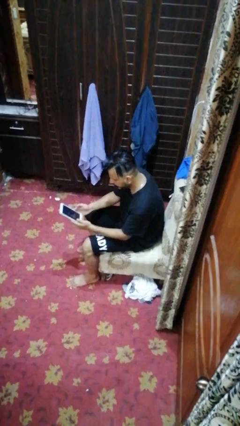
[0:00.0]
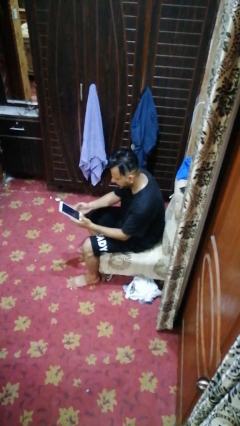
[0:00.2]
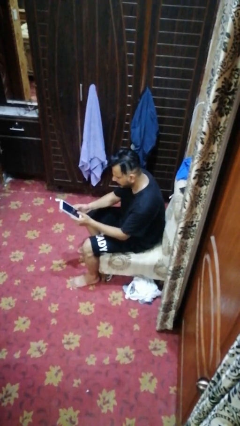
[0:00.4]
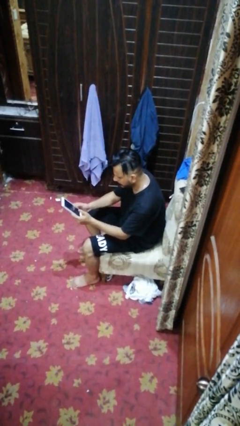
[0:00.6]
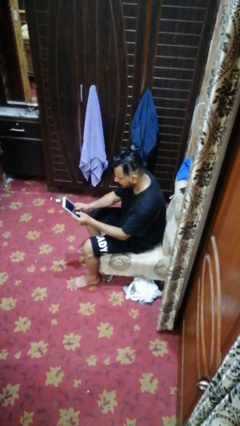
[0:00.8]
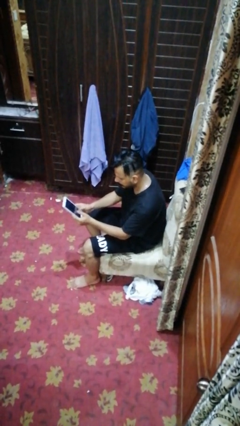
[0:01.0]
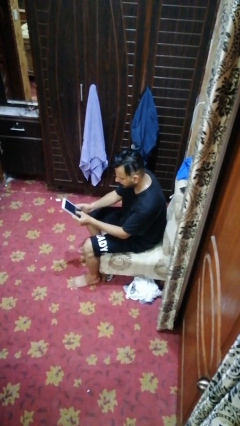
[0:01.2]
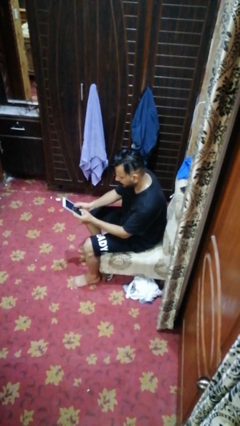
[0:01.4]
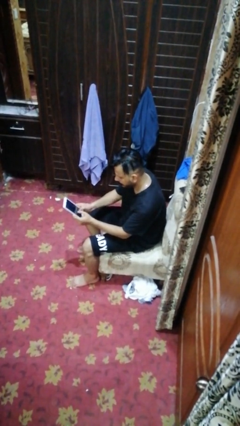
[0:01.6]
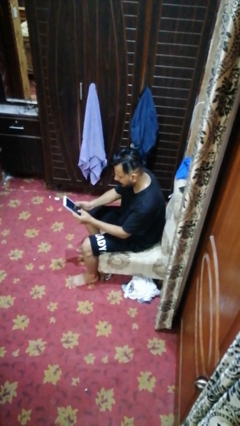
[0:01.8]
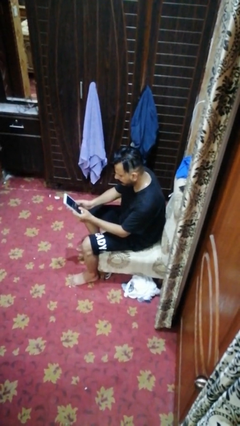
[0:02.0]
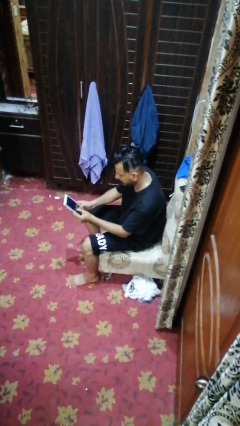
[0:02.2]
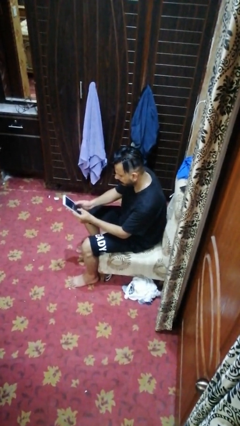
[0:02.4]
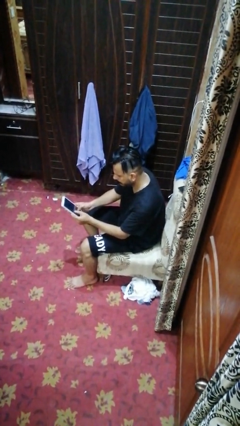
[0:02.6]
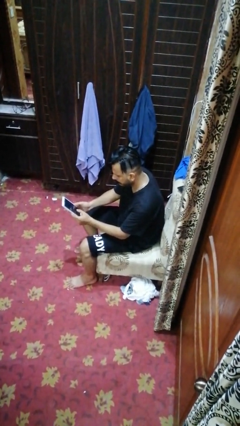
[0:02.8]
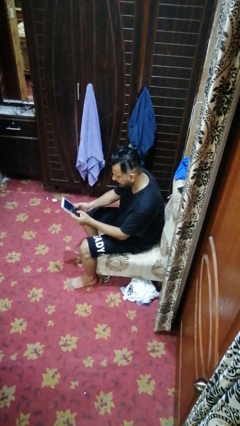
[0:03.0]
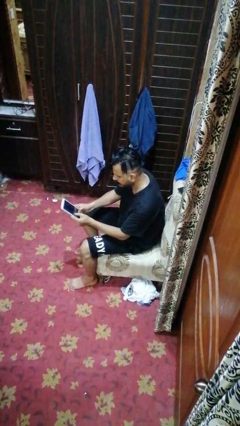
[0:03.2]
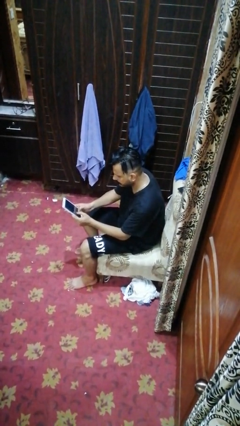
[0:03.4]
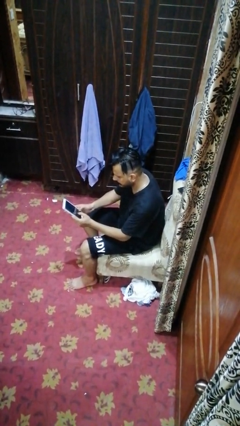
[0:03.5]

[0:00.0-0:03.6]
person interacts with tablet

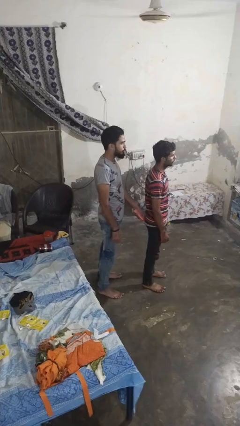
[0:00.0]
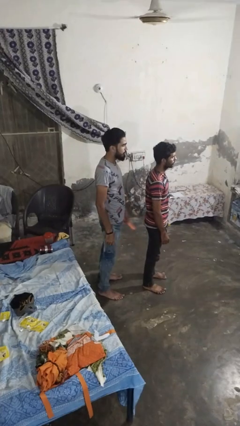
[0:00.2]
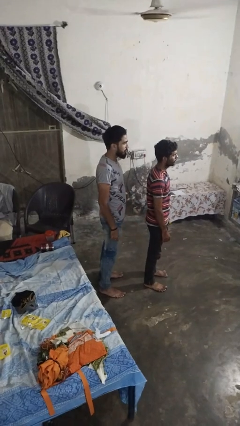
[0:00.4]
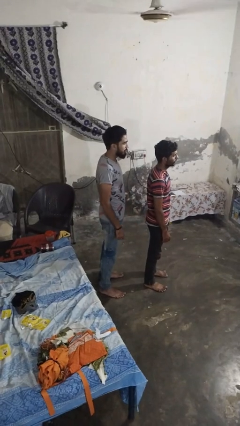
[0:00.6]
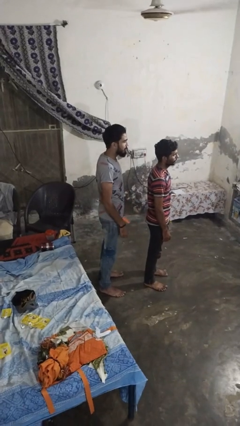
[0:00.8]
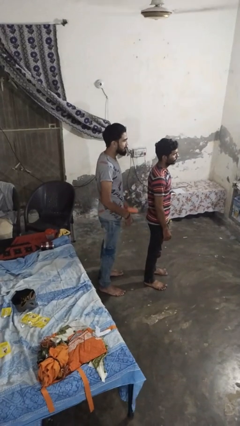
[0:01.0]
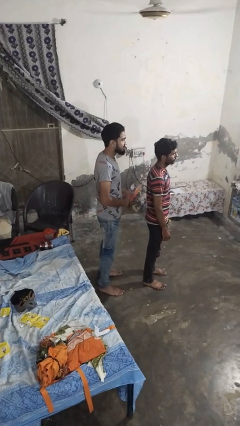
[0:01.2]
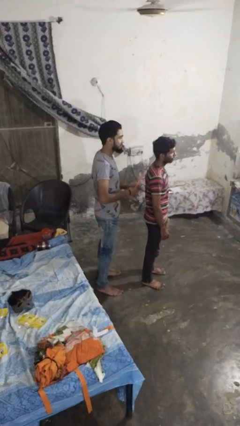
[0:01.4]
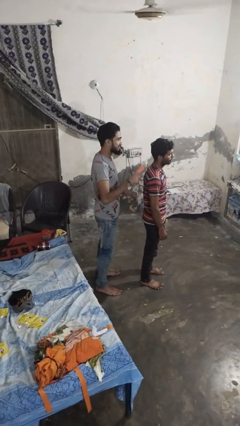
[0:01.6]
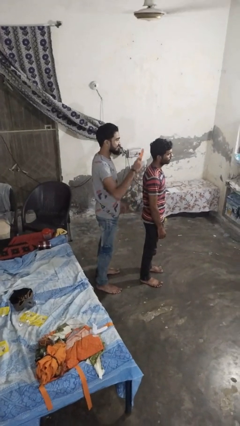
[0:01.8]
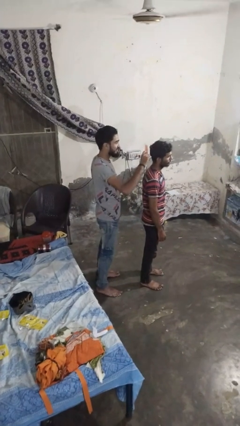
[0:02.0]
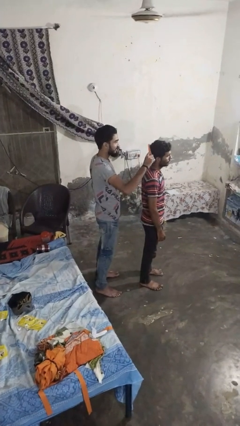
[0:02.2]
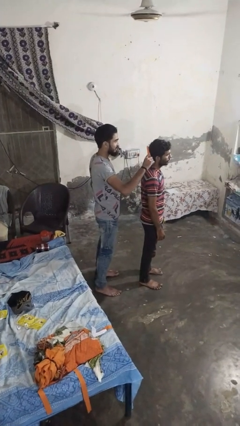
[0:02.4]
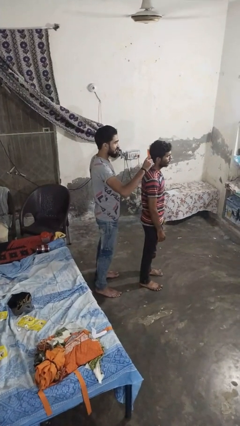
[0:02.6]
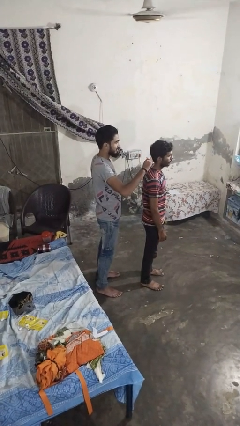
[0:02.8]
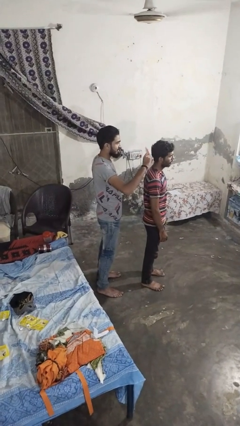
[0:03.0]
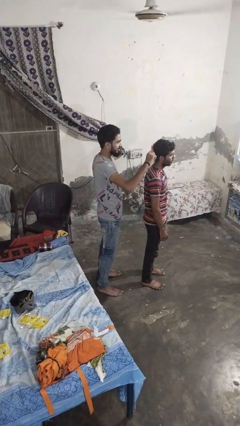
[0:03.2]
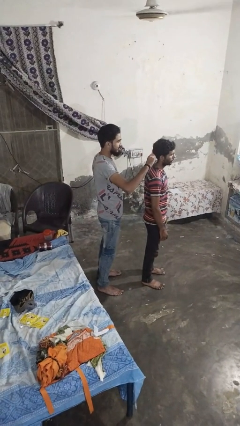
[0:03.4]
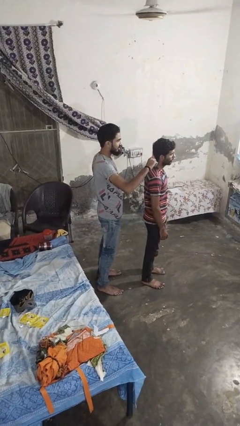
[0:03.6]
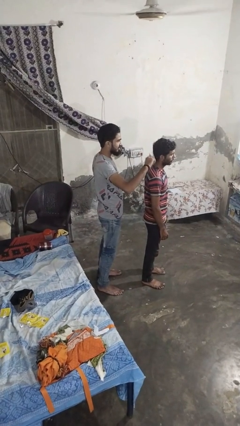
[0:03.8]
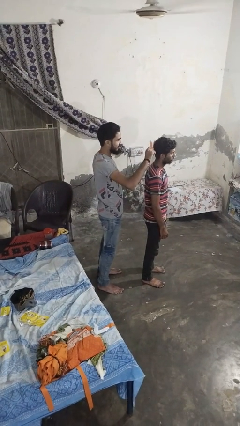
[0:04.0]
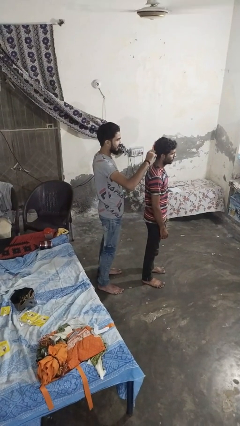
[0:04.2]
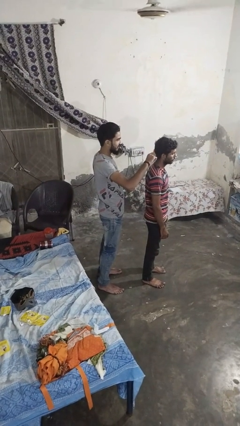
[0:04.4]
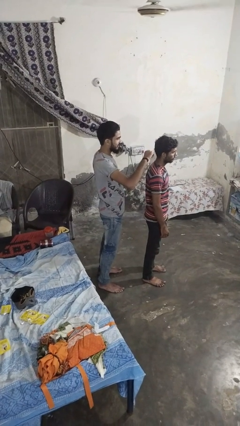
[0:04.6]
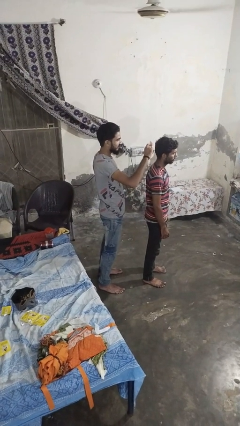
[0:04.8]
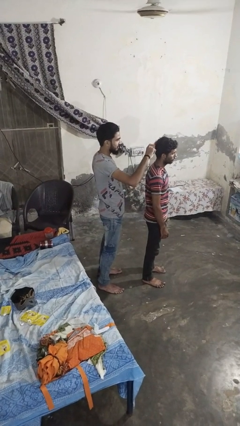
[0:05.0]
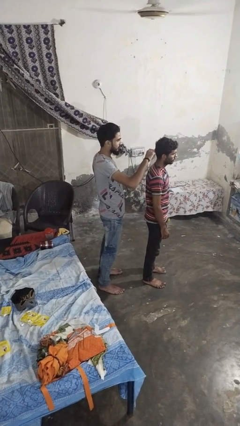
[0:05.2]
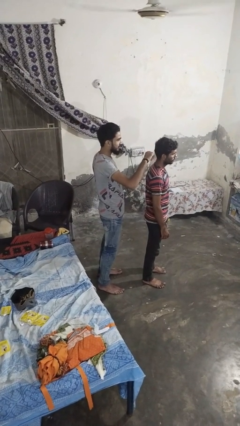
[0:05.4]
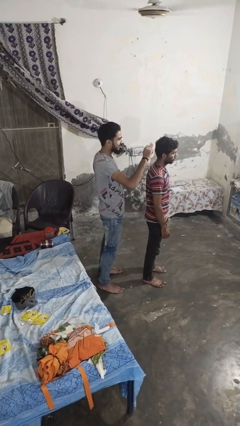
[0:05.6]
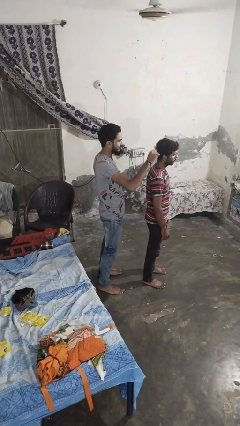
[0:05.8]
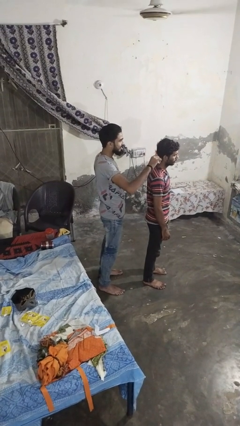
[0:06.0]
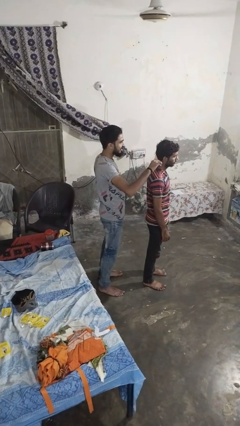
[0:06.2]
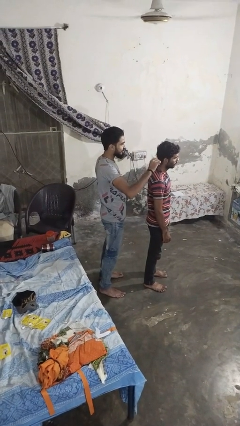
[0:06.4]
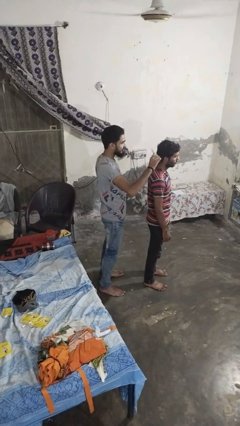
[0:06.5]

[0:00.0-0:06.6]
person brushes hair of person

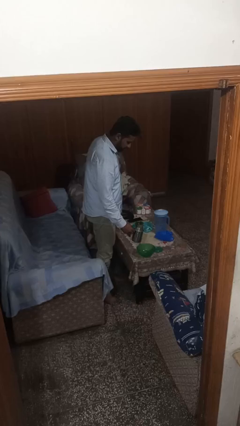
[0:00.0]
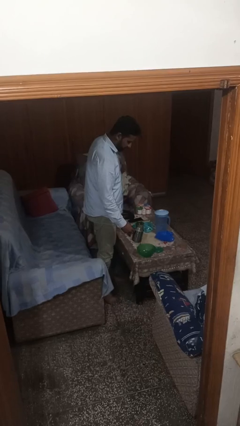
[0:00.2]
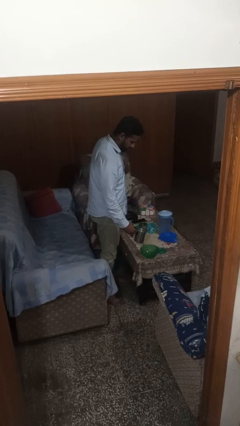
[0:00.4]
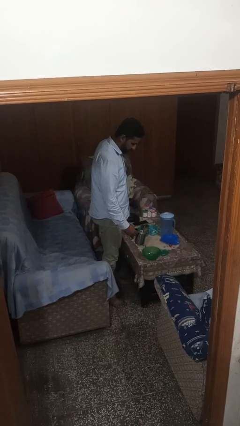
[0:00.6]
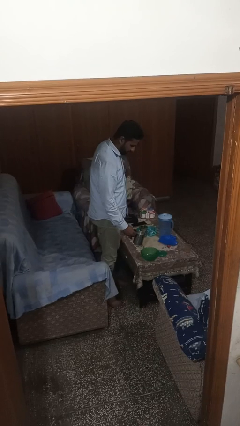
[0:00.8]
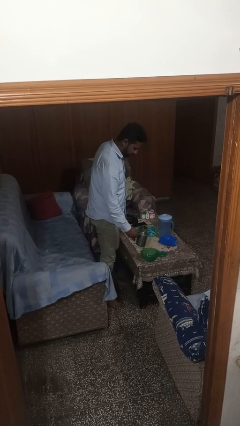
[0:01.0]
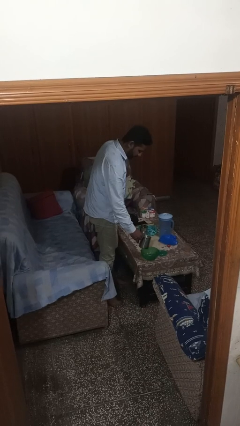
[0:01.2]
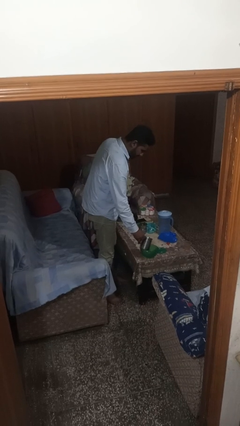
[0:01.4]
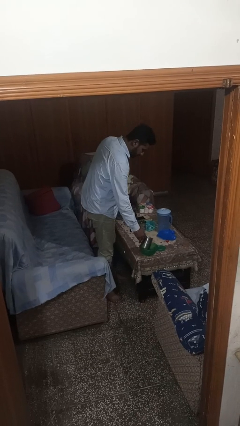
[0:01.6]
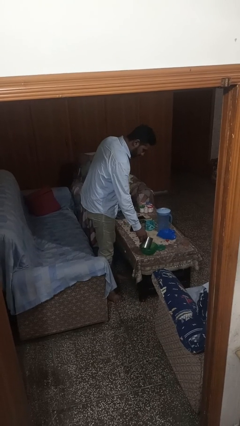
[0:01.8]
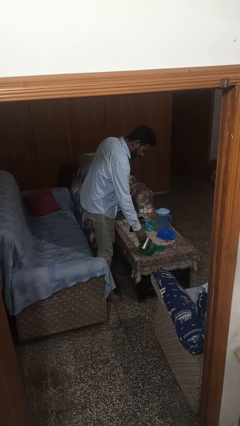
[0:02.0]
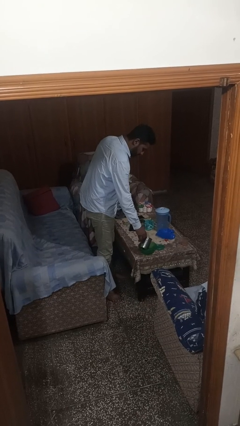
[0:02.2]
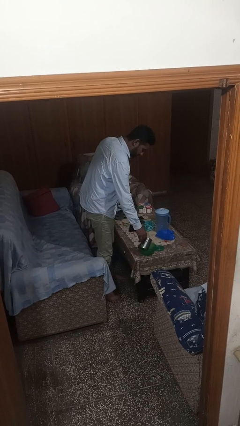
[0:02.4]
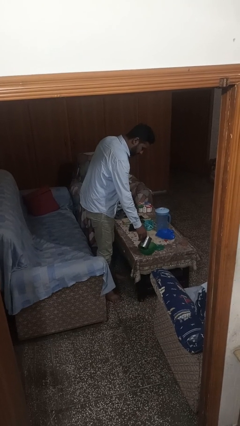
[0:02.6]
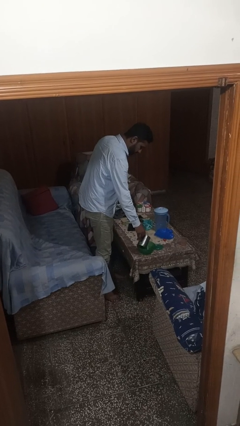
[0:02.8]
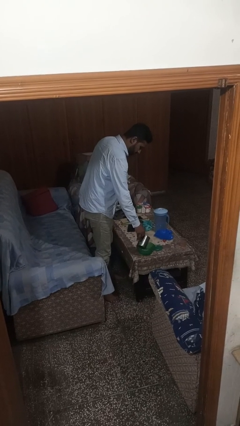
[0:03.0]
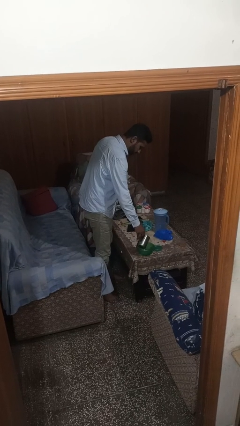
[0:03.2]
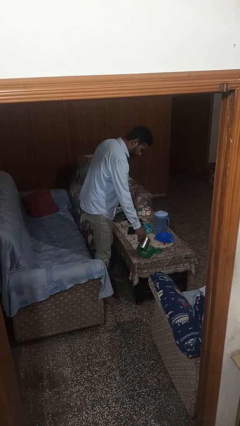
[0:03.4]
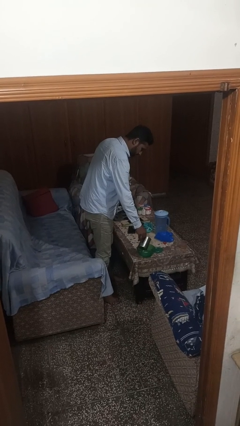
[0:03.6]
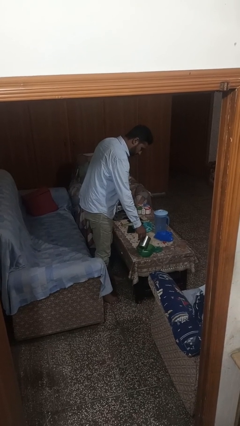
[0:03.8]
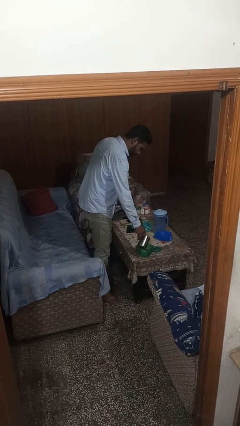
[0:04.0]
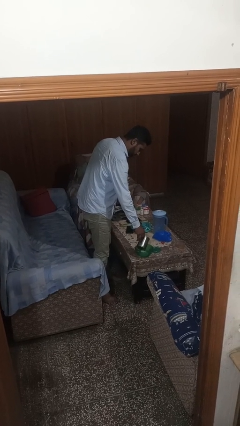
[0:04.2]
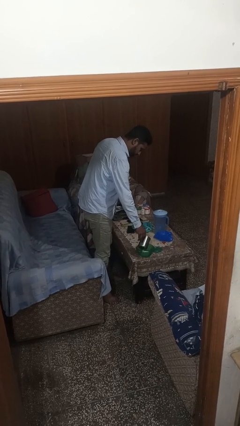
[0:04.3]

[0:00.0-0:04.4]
person pours into bowl

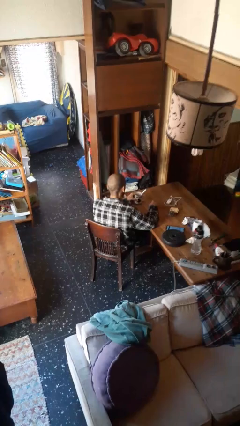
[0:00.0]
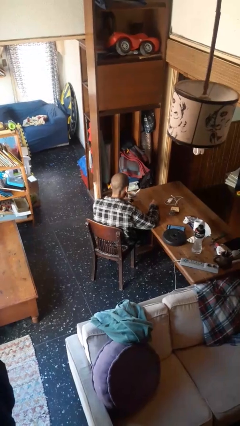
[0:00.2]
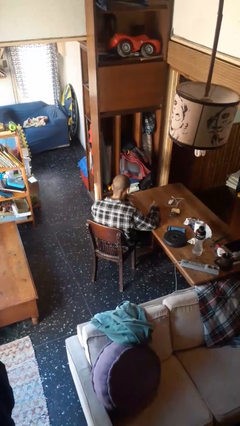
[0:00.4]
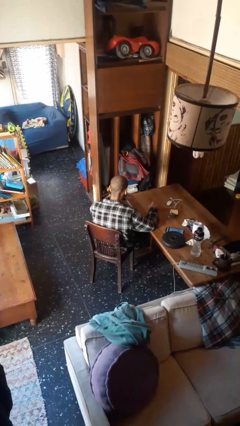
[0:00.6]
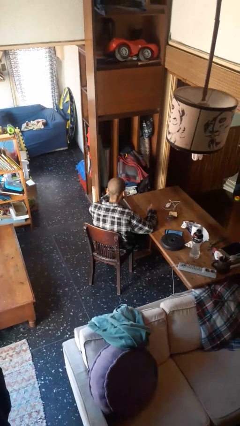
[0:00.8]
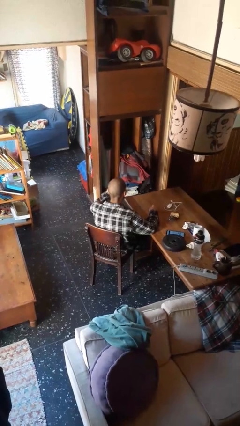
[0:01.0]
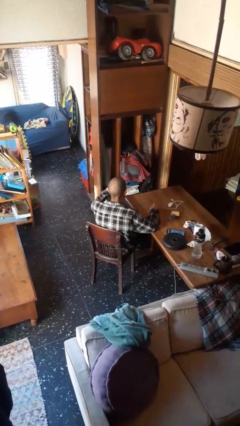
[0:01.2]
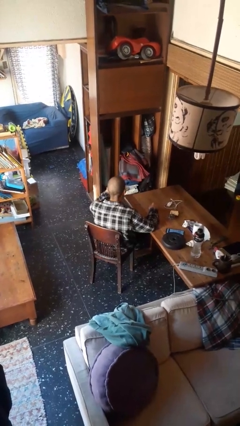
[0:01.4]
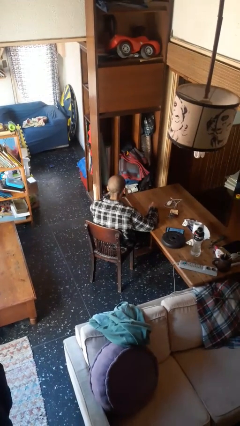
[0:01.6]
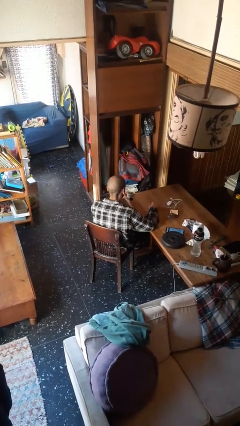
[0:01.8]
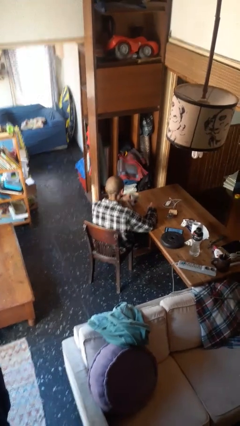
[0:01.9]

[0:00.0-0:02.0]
person drinks from mug

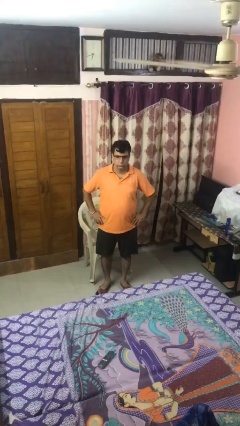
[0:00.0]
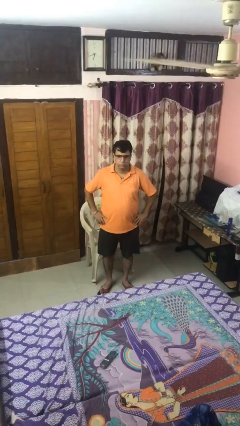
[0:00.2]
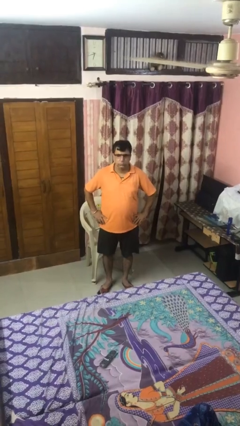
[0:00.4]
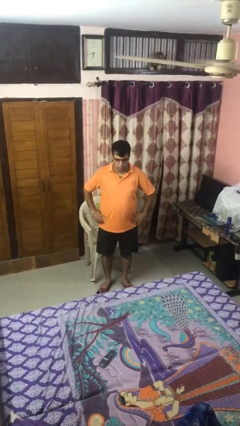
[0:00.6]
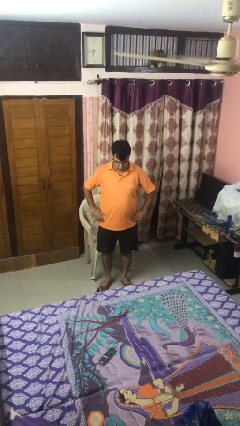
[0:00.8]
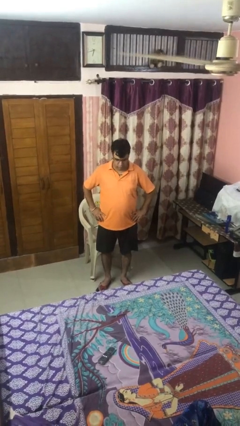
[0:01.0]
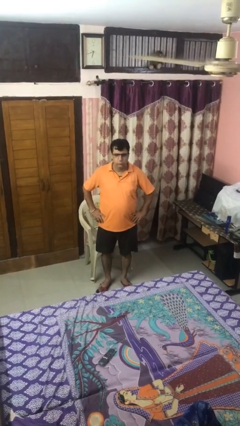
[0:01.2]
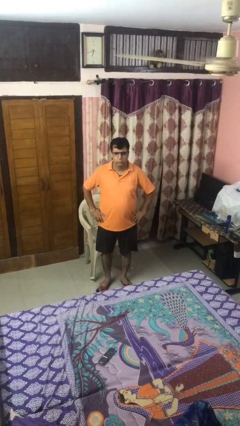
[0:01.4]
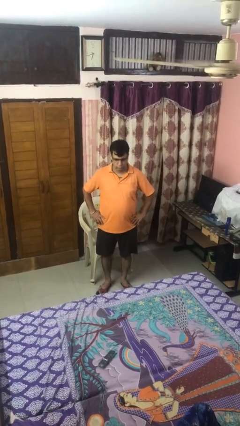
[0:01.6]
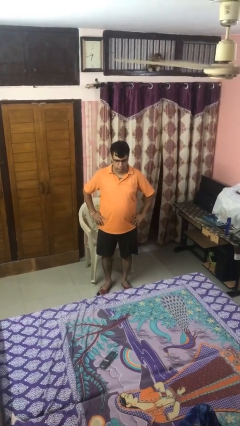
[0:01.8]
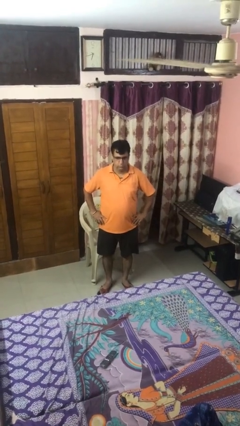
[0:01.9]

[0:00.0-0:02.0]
person nods head
